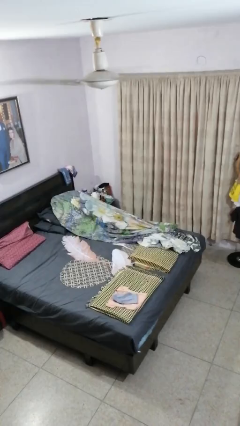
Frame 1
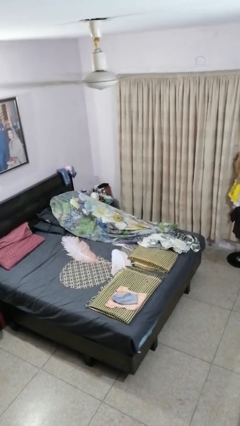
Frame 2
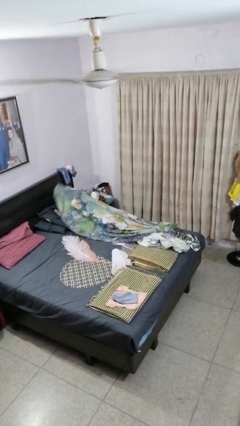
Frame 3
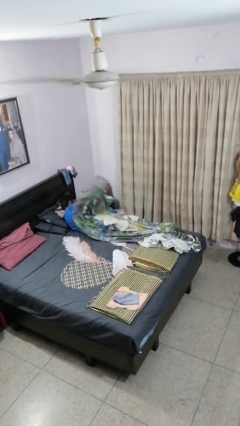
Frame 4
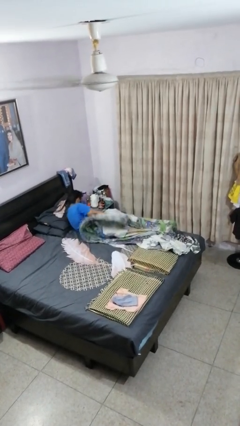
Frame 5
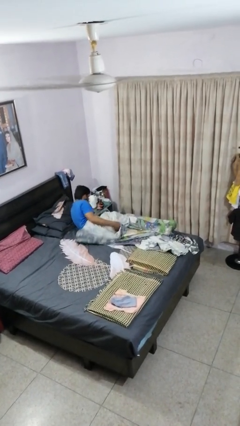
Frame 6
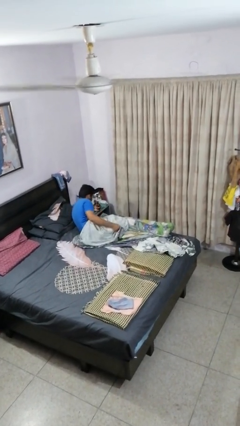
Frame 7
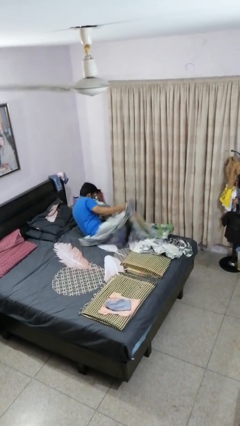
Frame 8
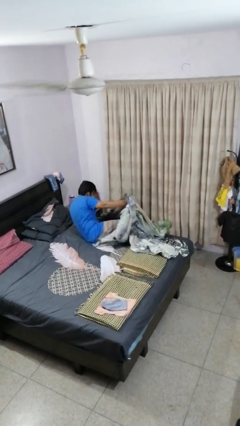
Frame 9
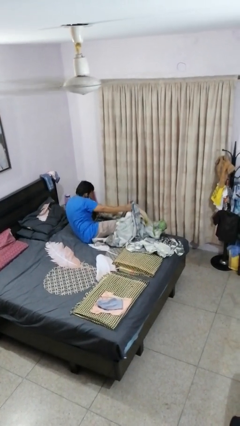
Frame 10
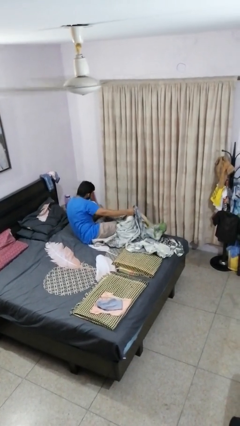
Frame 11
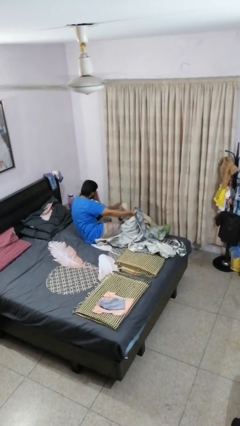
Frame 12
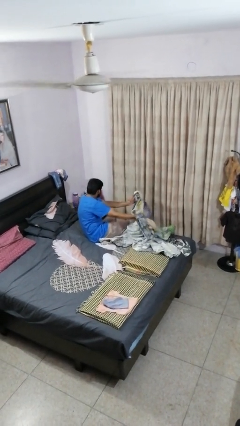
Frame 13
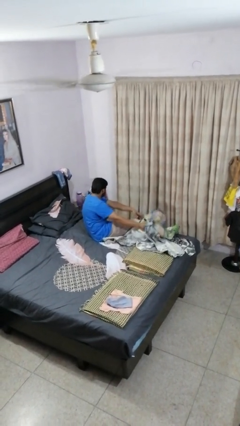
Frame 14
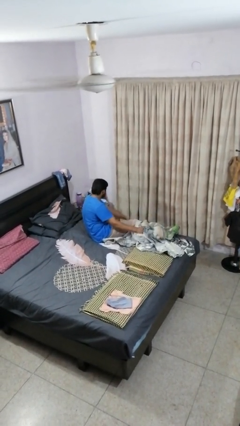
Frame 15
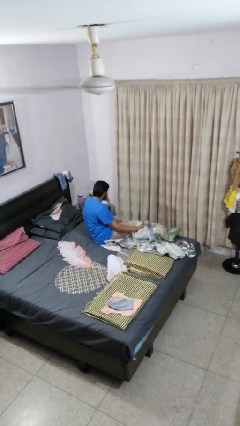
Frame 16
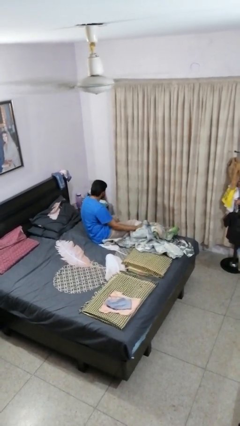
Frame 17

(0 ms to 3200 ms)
person uncovers with bedsheets

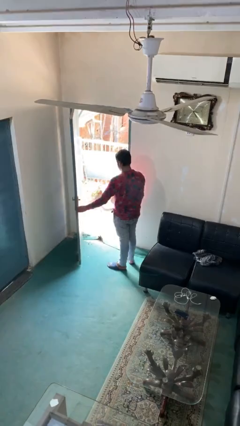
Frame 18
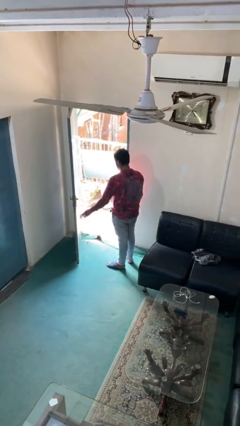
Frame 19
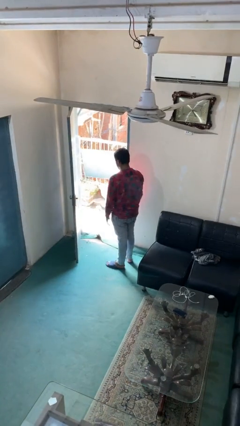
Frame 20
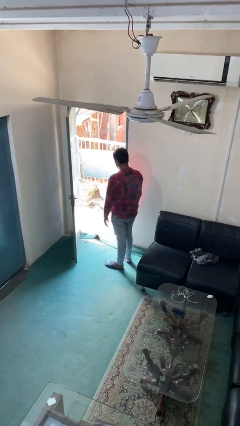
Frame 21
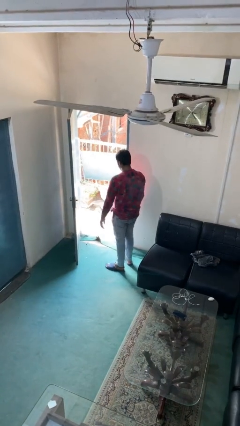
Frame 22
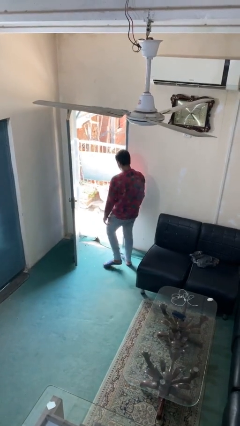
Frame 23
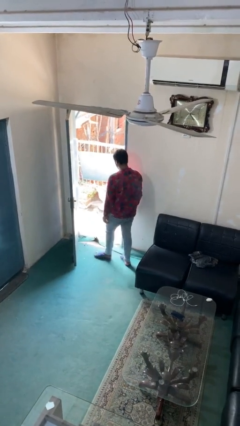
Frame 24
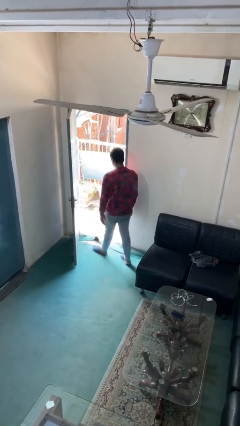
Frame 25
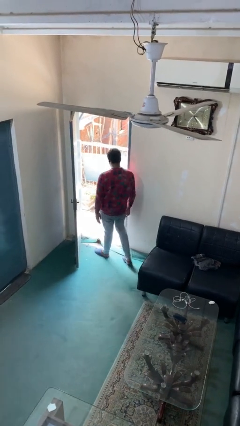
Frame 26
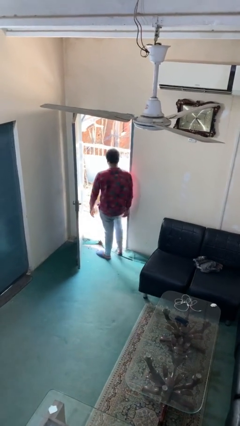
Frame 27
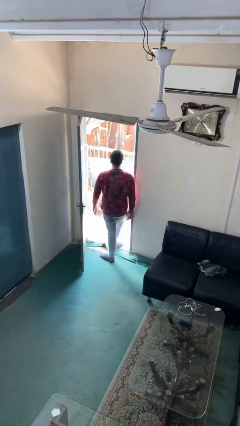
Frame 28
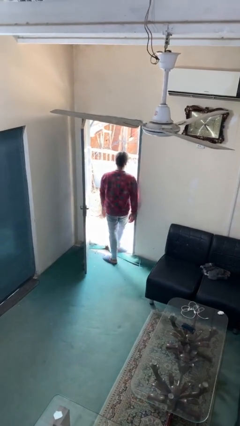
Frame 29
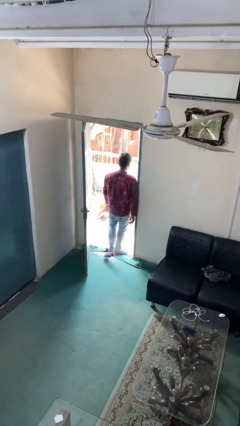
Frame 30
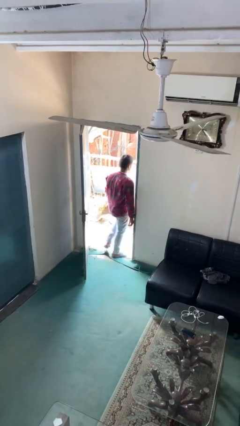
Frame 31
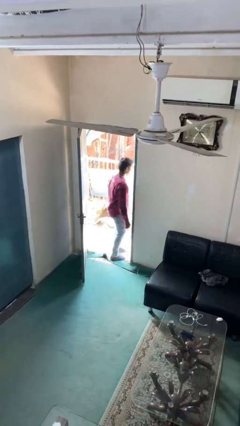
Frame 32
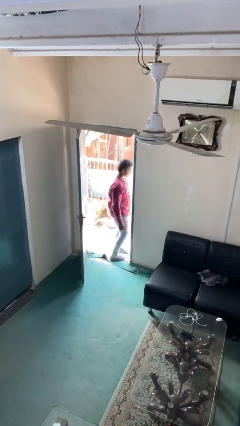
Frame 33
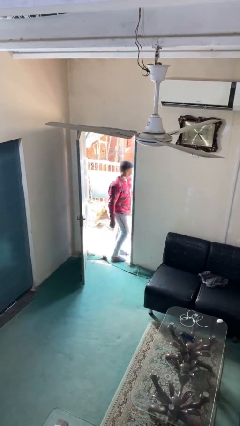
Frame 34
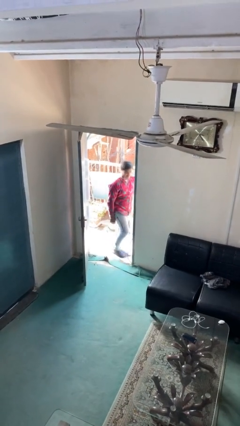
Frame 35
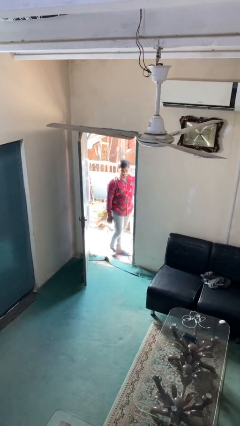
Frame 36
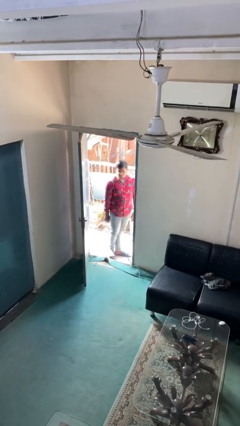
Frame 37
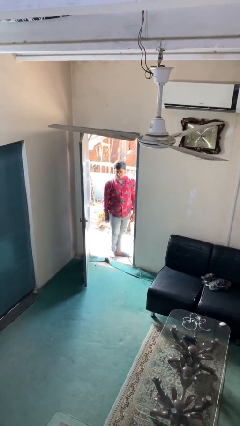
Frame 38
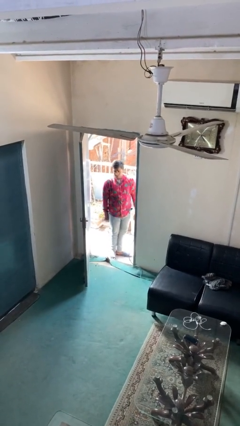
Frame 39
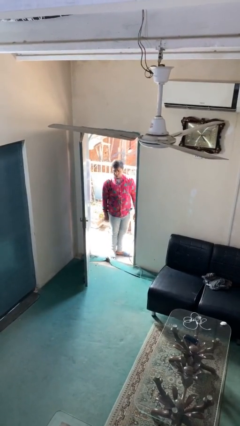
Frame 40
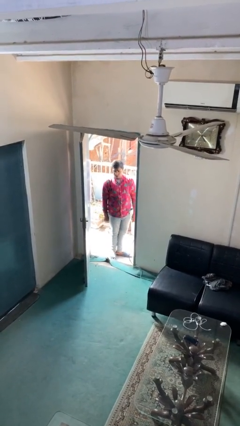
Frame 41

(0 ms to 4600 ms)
person exits scene through structure

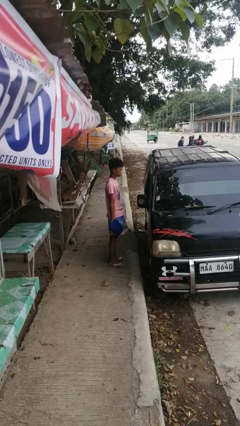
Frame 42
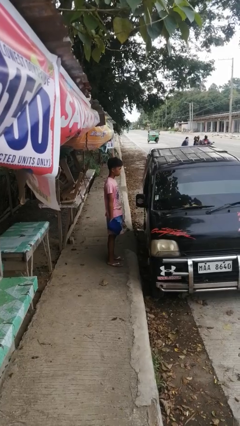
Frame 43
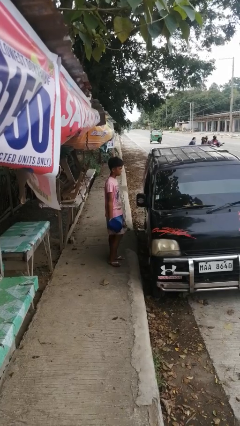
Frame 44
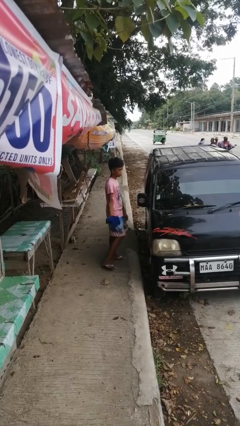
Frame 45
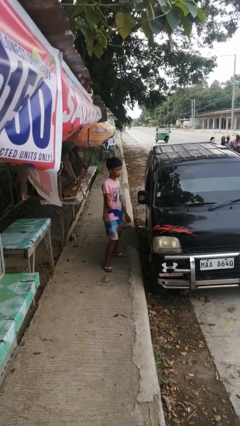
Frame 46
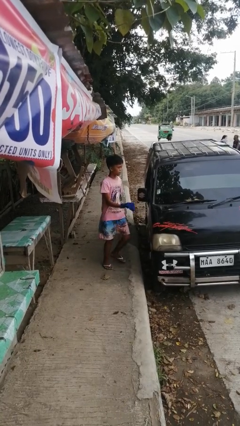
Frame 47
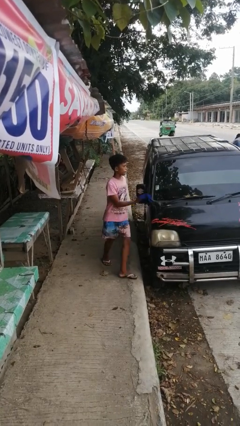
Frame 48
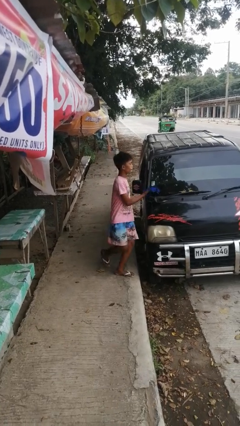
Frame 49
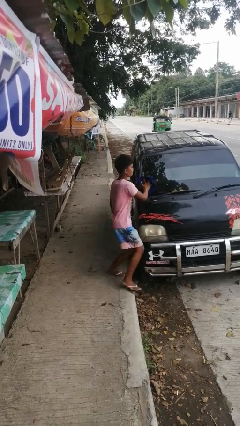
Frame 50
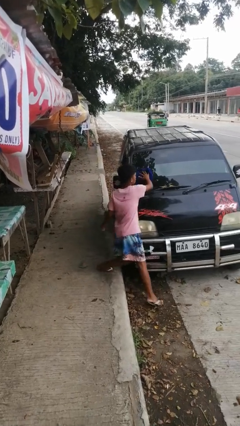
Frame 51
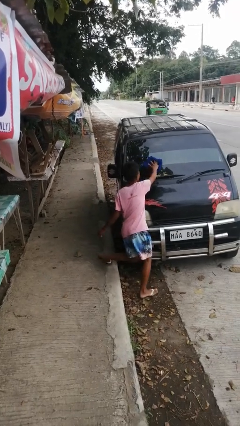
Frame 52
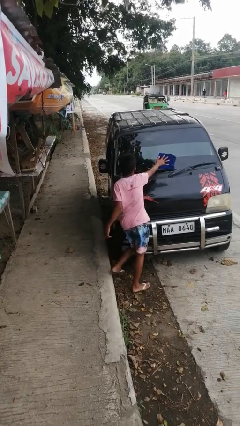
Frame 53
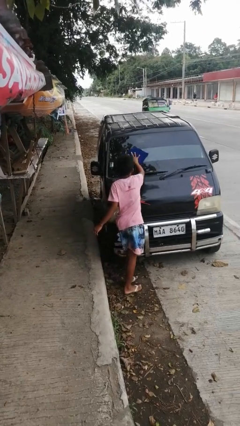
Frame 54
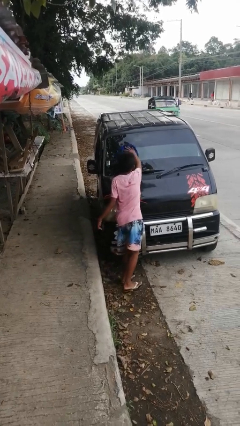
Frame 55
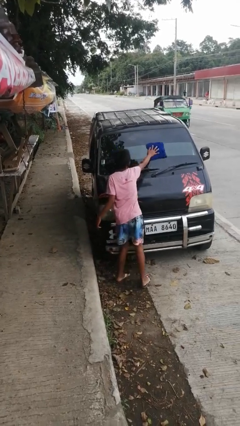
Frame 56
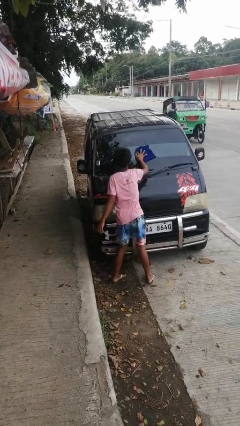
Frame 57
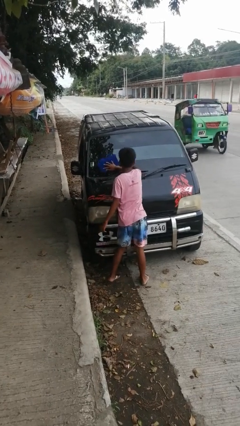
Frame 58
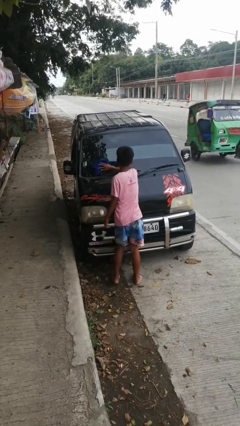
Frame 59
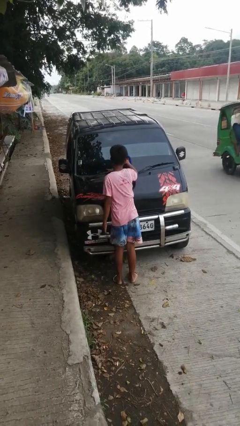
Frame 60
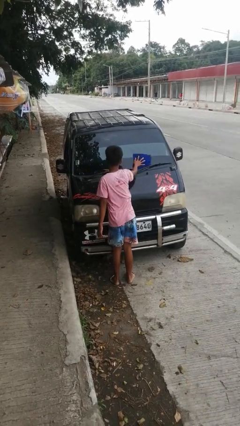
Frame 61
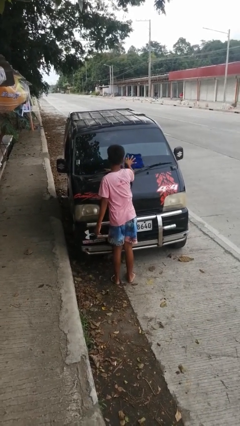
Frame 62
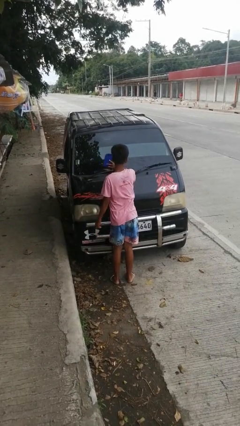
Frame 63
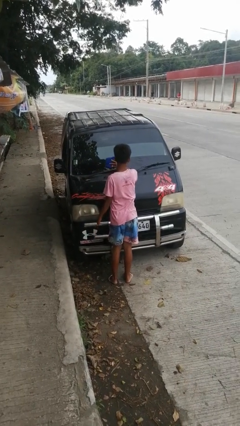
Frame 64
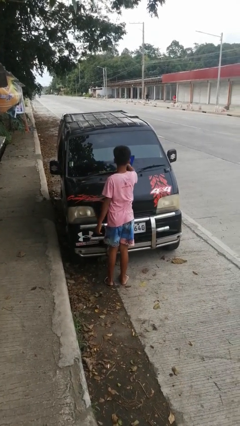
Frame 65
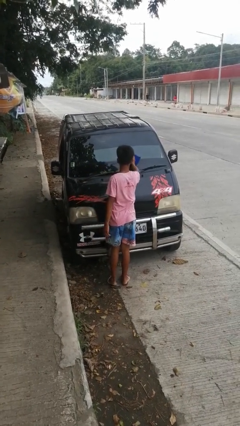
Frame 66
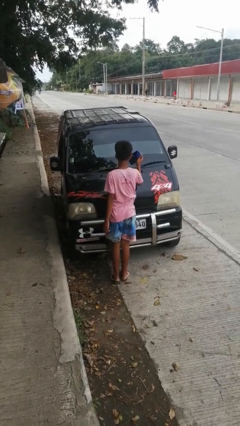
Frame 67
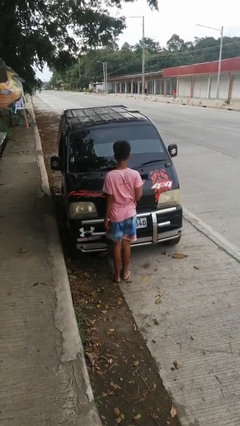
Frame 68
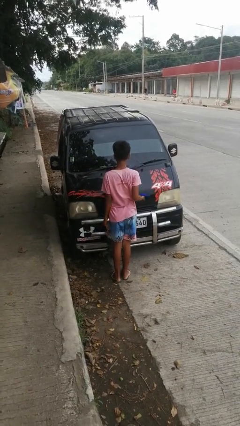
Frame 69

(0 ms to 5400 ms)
person polishes car with rag

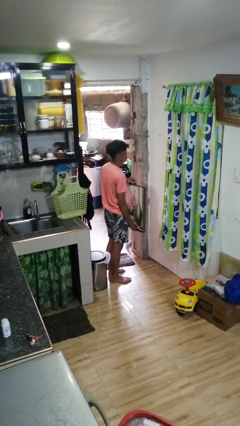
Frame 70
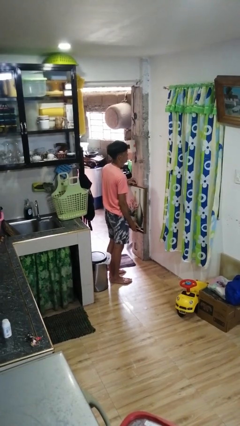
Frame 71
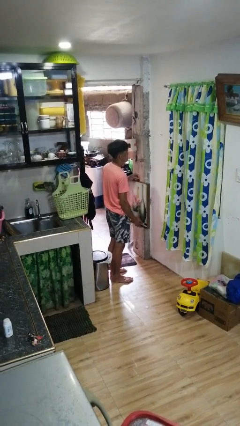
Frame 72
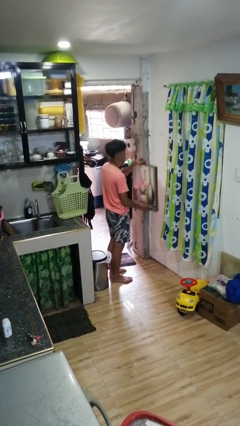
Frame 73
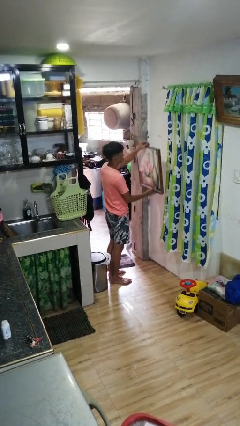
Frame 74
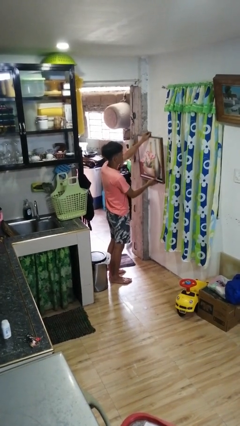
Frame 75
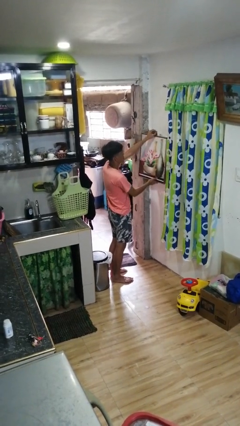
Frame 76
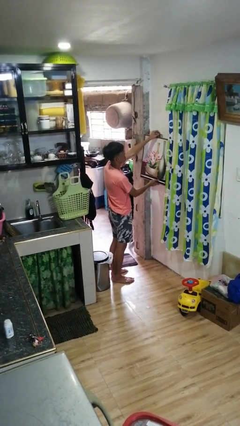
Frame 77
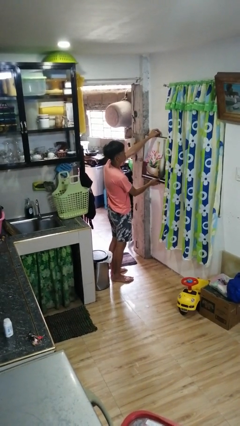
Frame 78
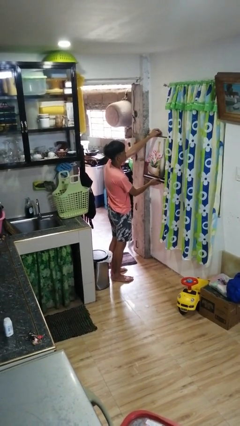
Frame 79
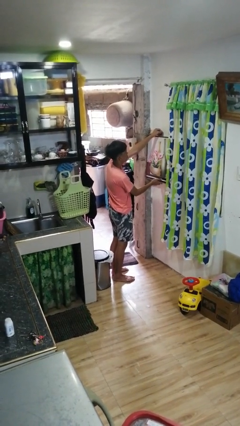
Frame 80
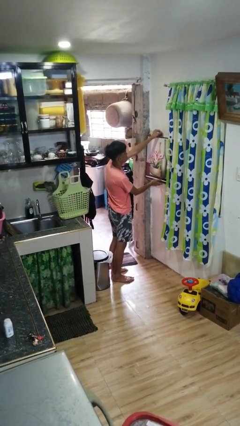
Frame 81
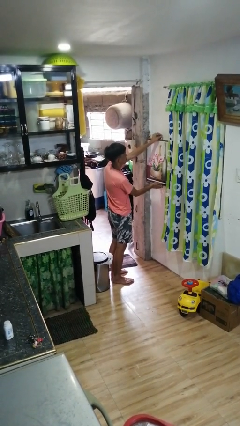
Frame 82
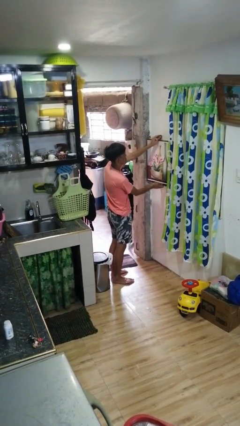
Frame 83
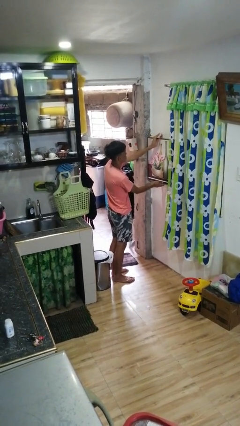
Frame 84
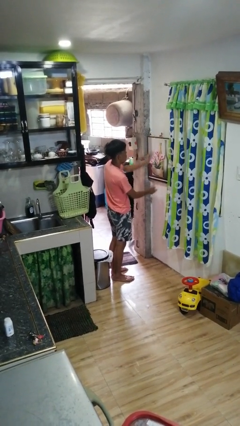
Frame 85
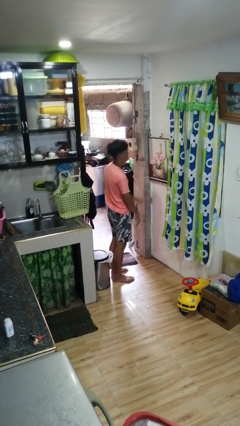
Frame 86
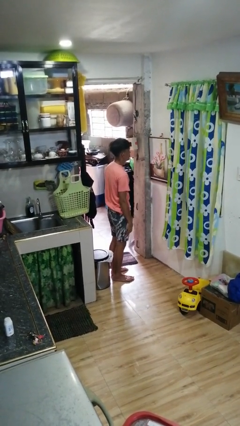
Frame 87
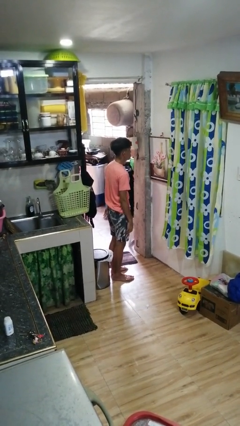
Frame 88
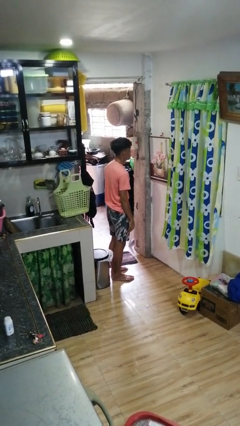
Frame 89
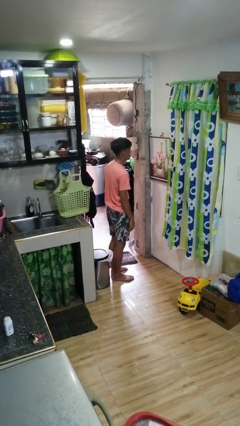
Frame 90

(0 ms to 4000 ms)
person puts up picture frame

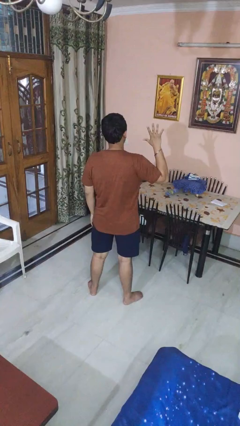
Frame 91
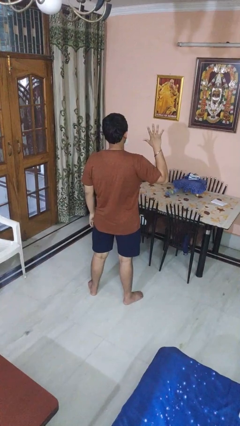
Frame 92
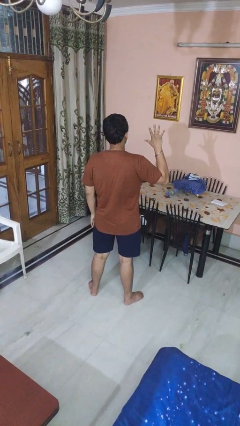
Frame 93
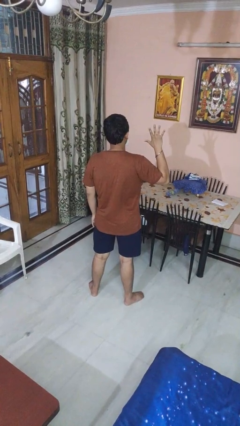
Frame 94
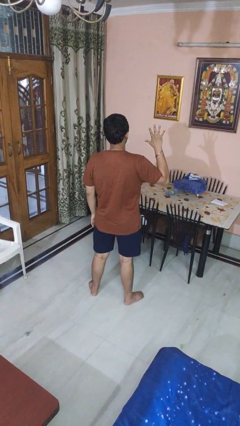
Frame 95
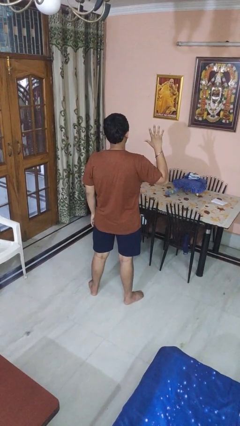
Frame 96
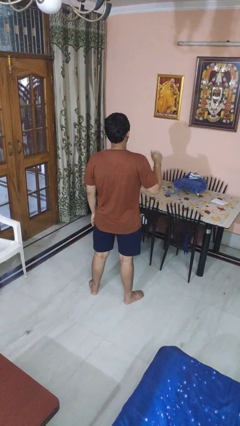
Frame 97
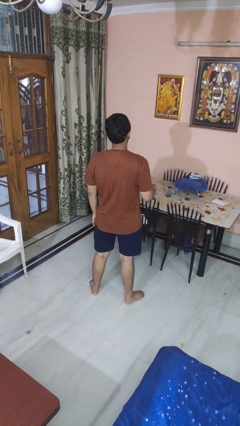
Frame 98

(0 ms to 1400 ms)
person gestures number five
